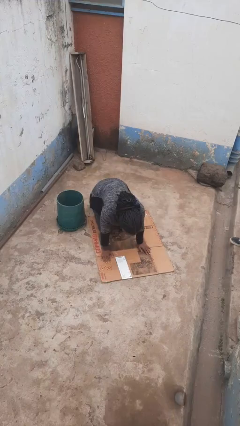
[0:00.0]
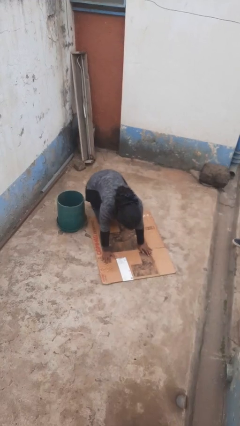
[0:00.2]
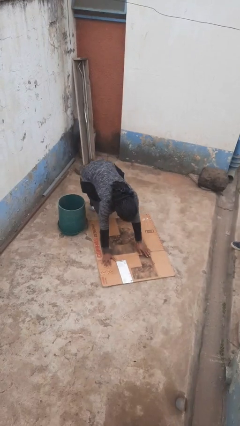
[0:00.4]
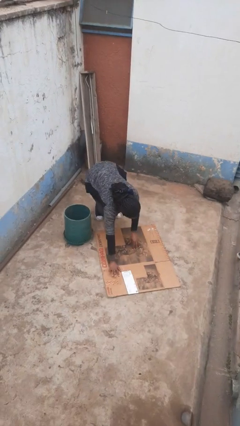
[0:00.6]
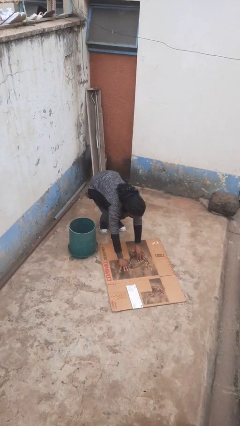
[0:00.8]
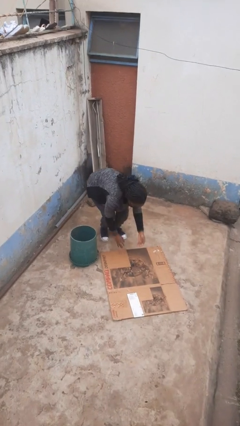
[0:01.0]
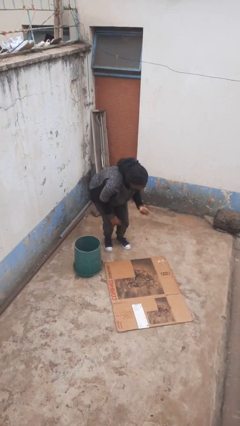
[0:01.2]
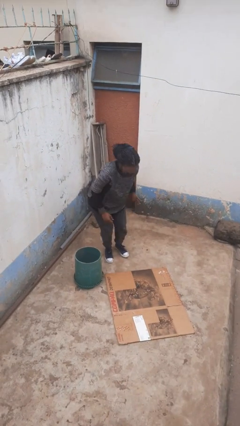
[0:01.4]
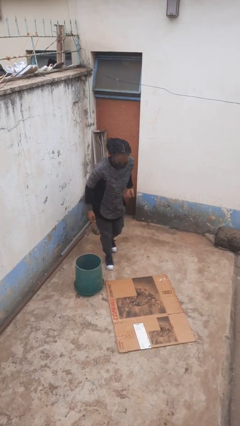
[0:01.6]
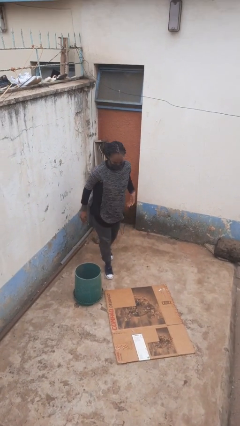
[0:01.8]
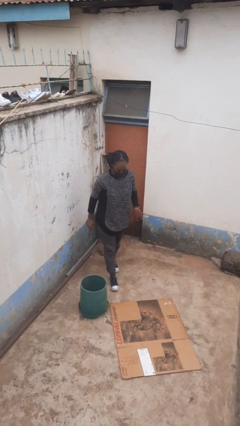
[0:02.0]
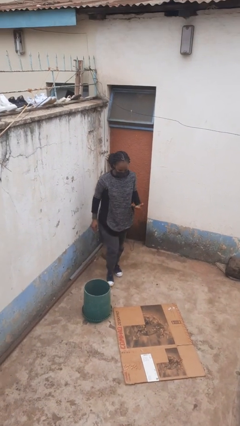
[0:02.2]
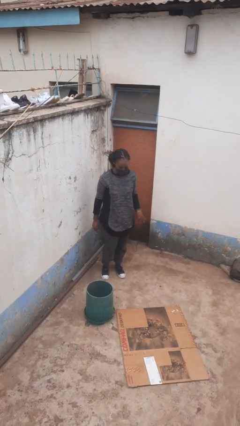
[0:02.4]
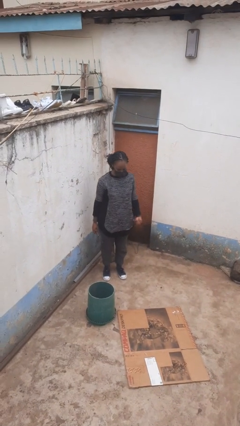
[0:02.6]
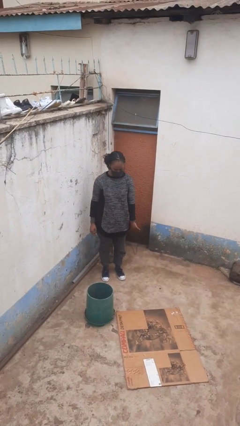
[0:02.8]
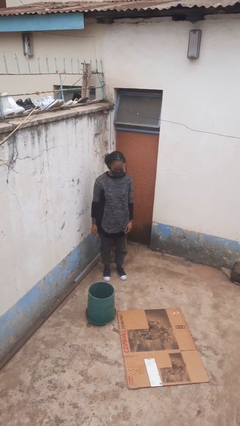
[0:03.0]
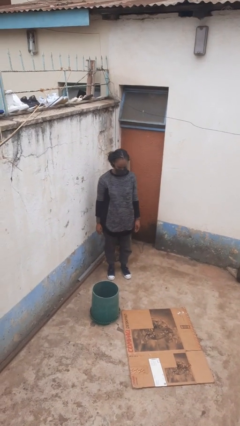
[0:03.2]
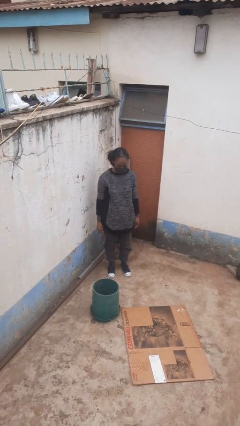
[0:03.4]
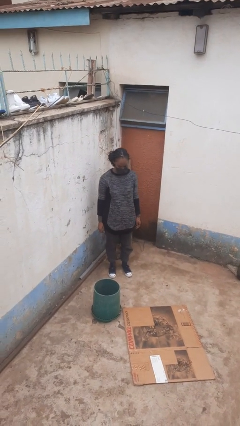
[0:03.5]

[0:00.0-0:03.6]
person stands up from floor

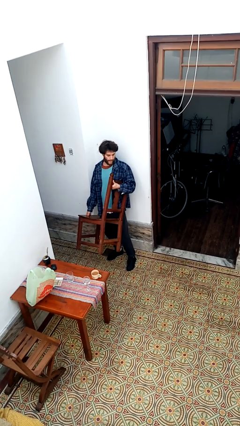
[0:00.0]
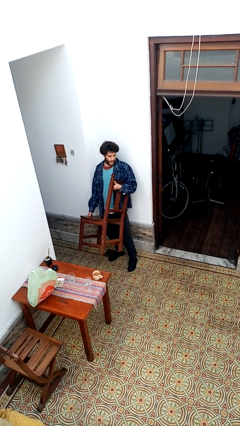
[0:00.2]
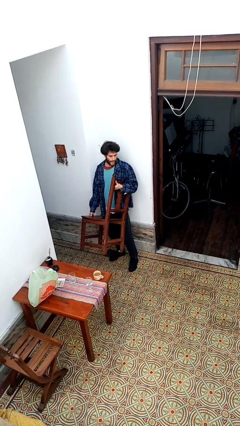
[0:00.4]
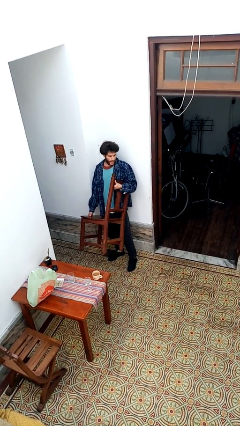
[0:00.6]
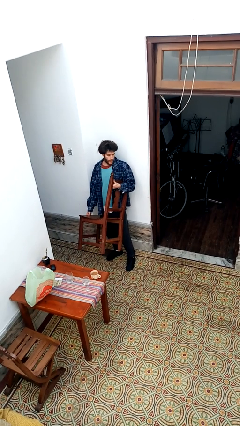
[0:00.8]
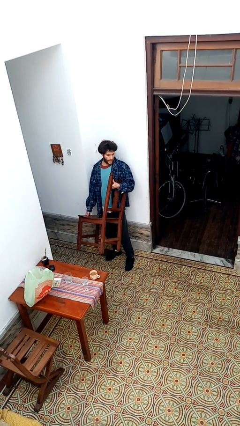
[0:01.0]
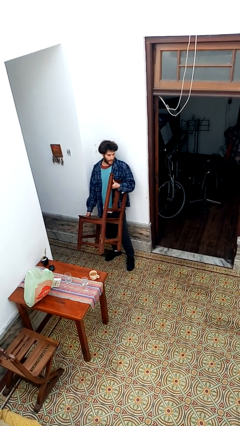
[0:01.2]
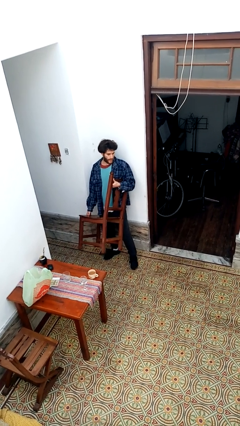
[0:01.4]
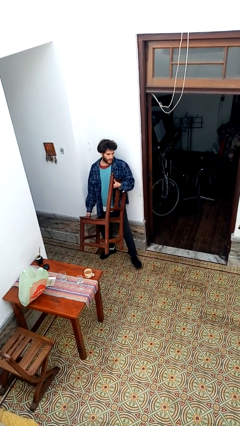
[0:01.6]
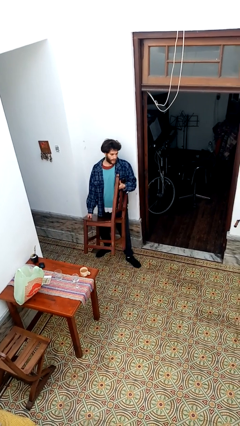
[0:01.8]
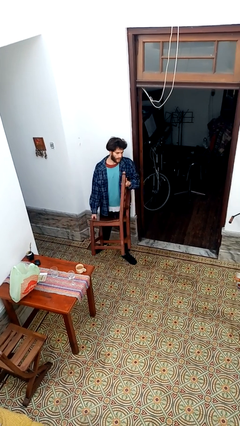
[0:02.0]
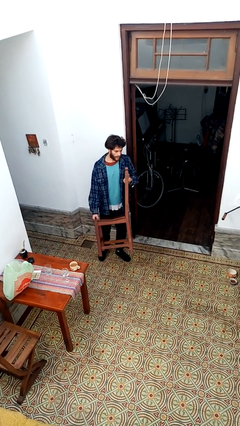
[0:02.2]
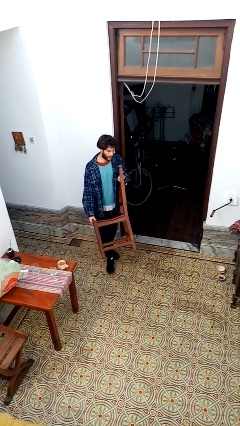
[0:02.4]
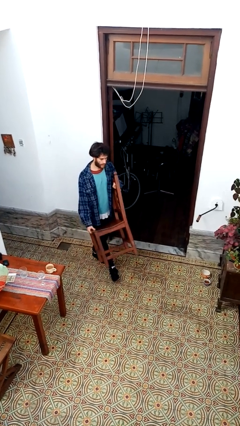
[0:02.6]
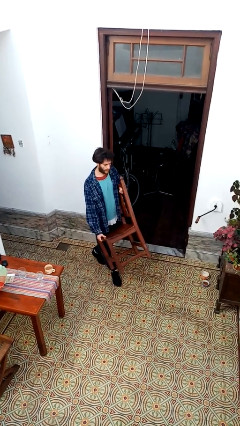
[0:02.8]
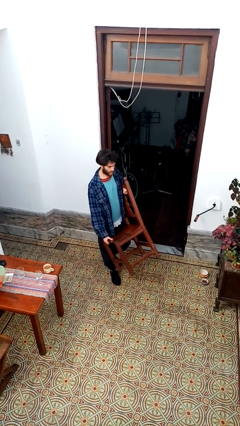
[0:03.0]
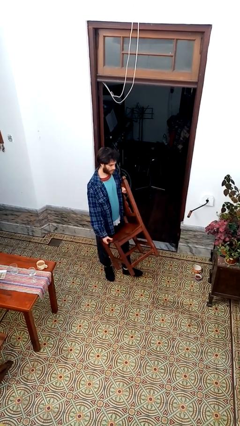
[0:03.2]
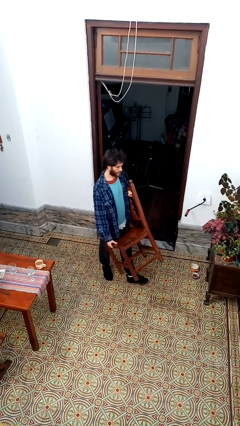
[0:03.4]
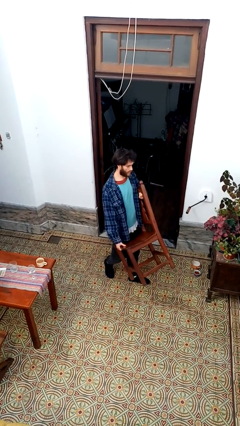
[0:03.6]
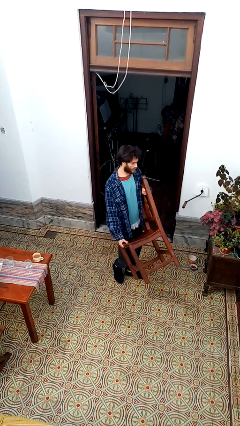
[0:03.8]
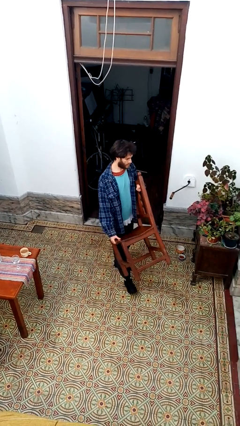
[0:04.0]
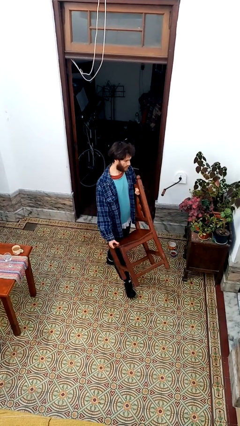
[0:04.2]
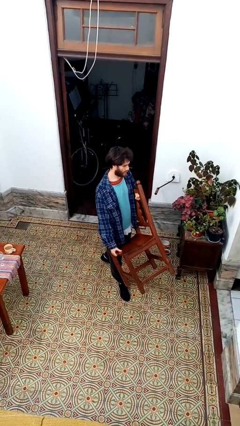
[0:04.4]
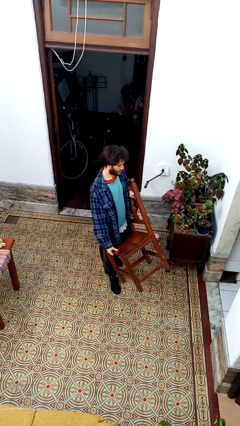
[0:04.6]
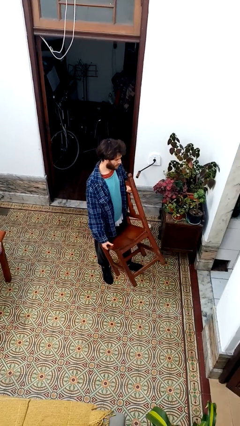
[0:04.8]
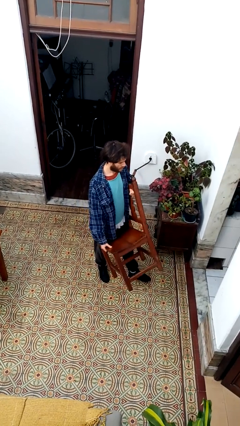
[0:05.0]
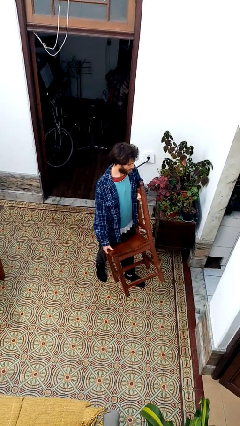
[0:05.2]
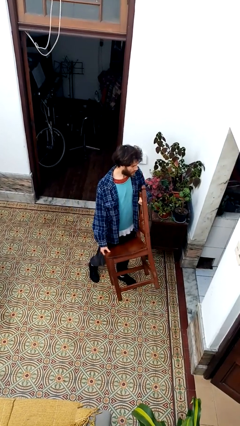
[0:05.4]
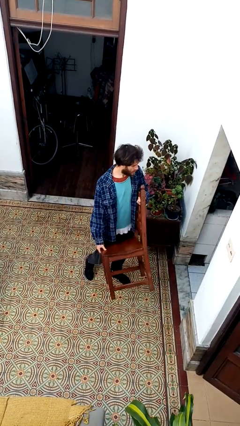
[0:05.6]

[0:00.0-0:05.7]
person carries furniture

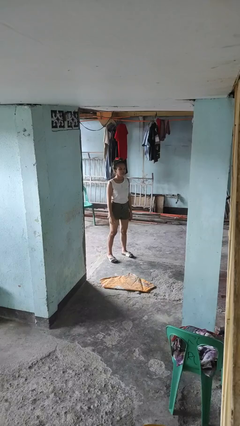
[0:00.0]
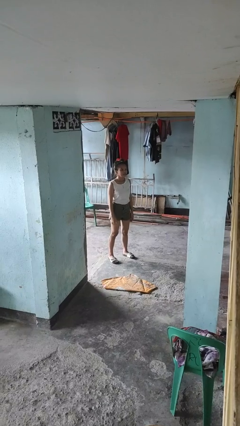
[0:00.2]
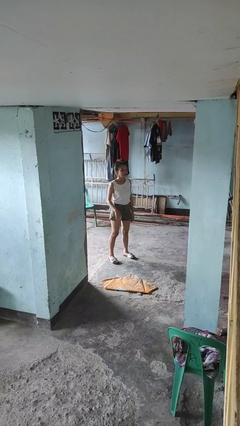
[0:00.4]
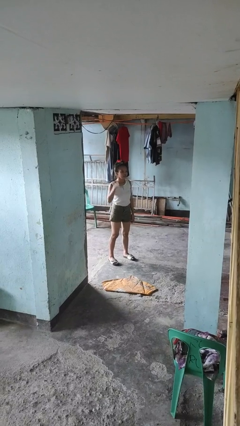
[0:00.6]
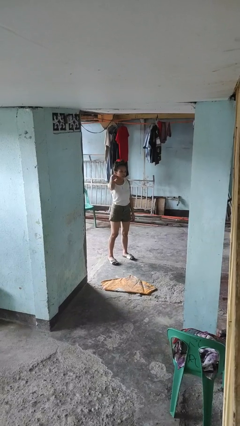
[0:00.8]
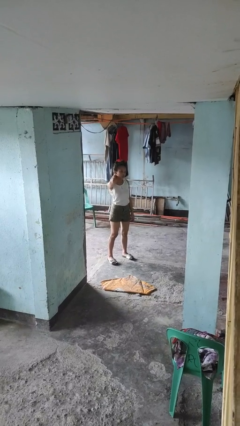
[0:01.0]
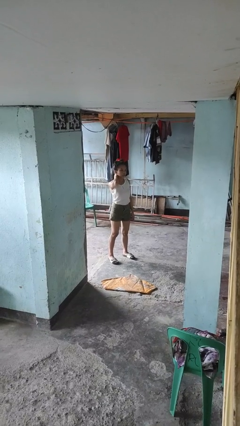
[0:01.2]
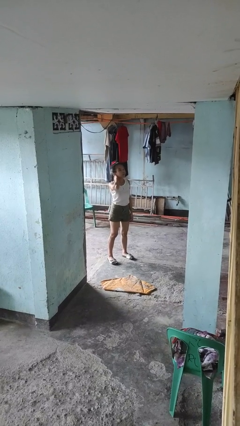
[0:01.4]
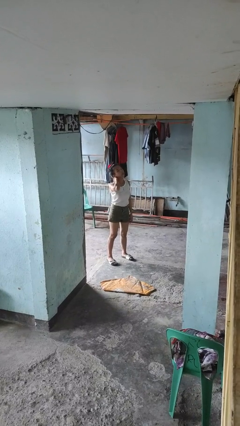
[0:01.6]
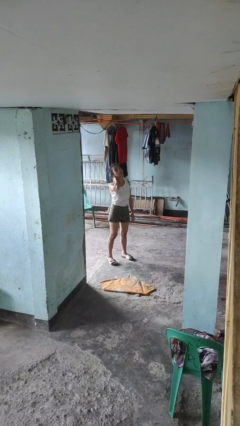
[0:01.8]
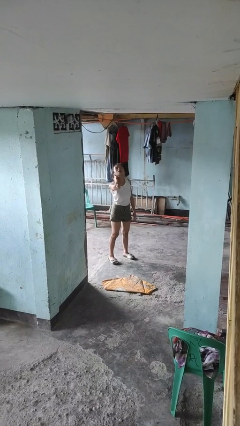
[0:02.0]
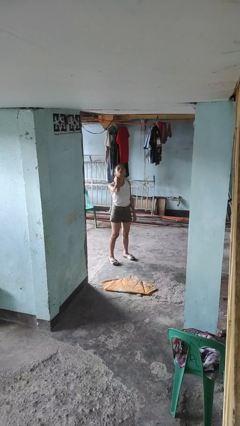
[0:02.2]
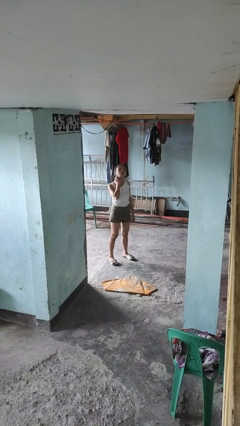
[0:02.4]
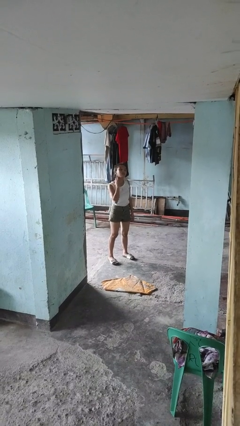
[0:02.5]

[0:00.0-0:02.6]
person rubs neck

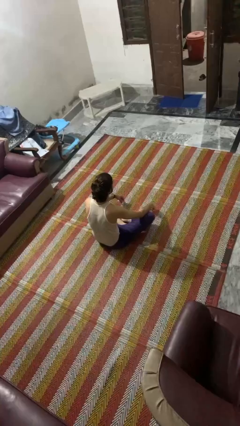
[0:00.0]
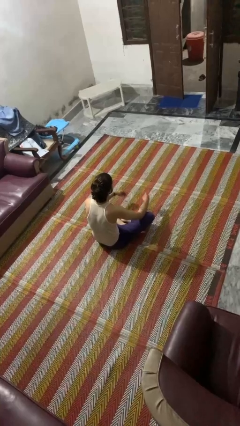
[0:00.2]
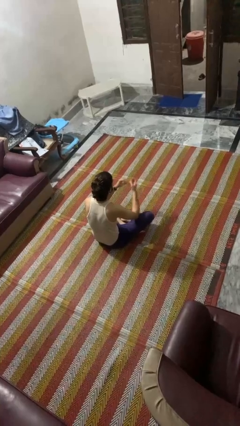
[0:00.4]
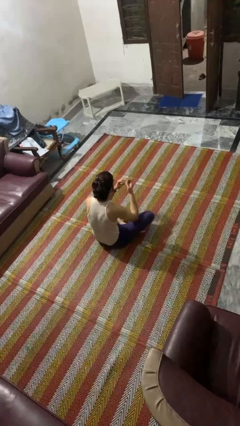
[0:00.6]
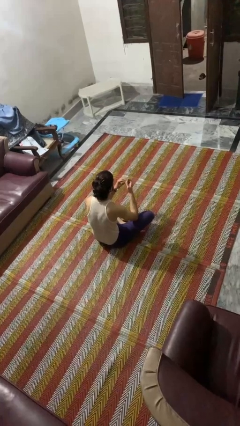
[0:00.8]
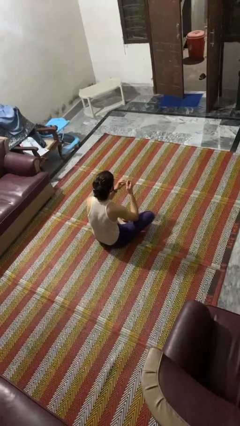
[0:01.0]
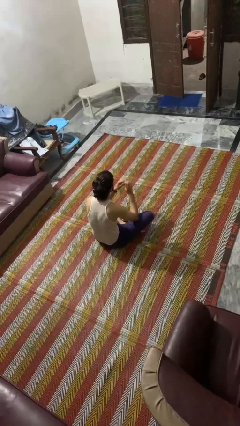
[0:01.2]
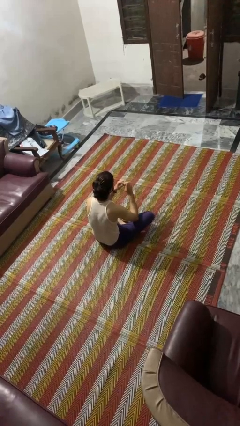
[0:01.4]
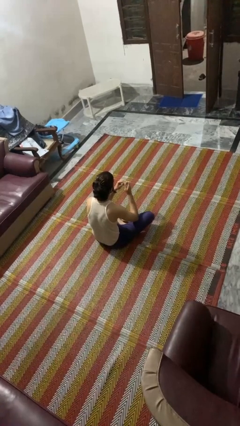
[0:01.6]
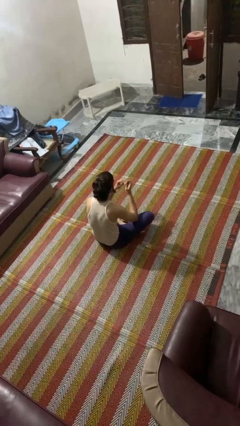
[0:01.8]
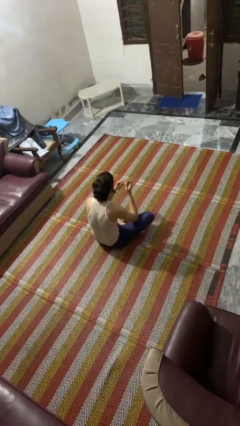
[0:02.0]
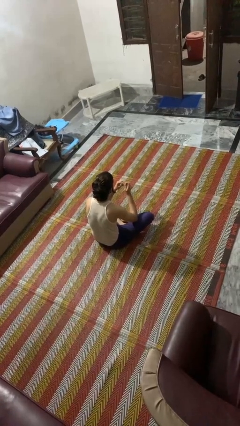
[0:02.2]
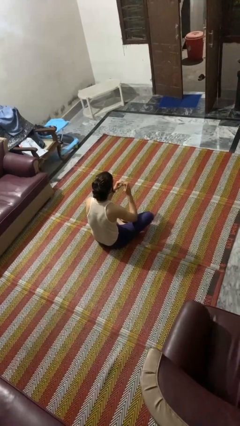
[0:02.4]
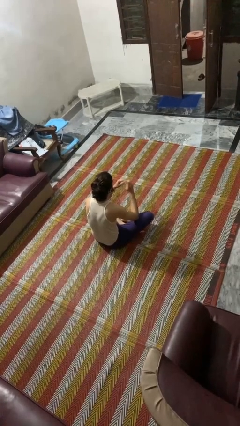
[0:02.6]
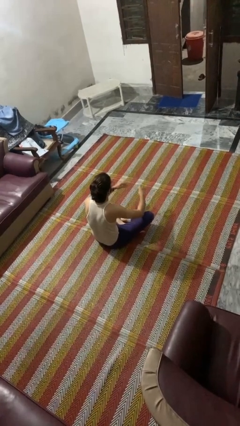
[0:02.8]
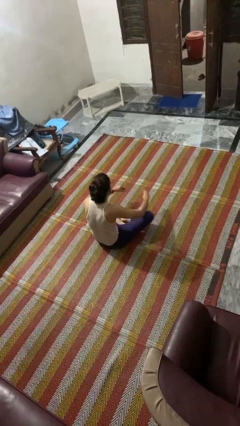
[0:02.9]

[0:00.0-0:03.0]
person files fingernails

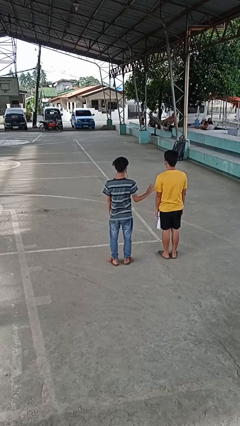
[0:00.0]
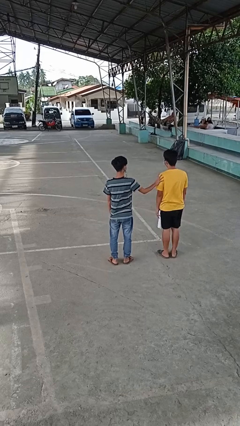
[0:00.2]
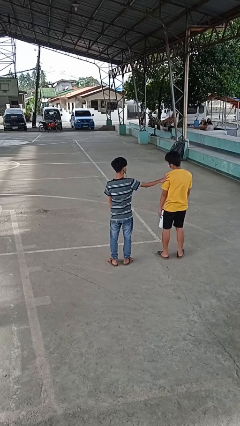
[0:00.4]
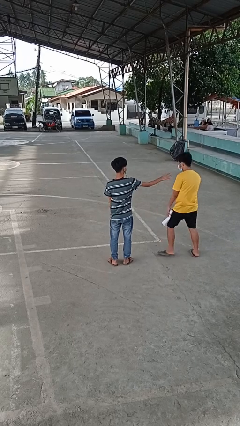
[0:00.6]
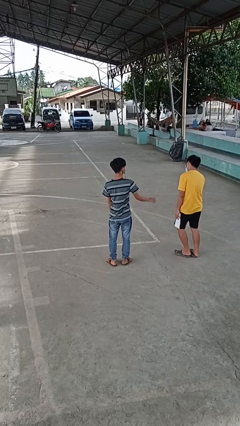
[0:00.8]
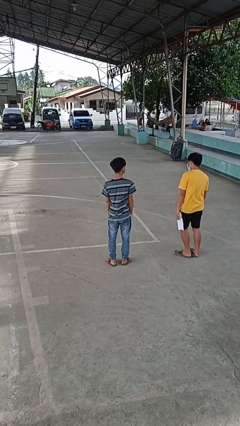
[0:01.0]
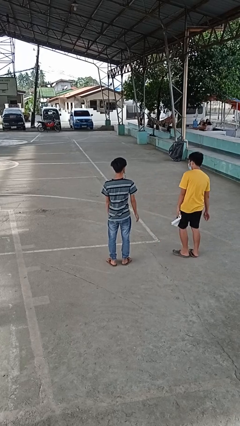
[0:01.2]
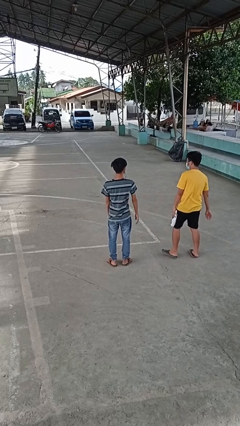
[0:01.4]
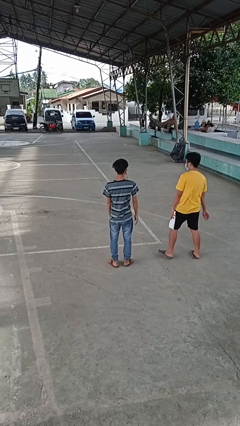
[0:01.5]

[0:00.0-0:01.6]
person shoves person

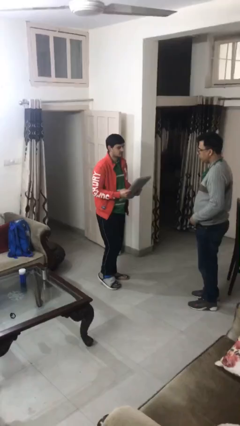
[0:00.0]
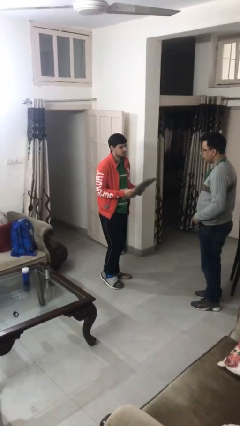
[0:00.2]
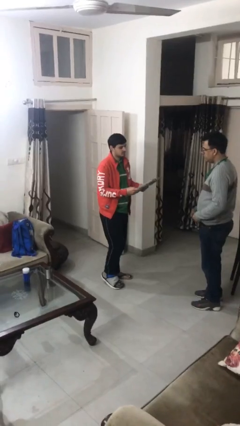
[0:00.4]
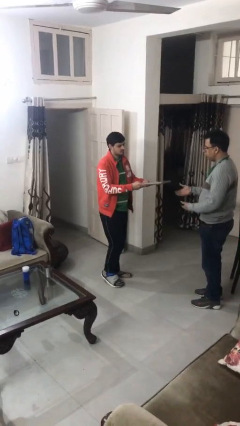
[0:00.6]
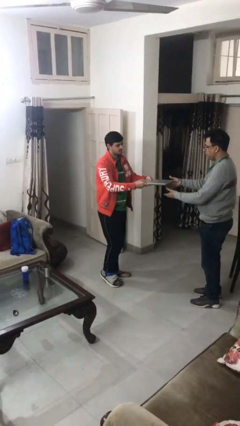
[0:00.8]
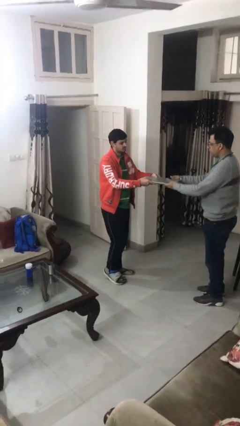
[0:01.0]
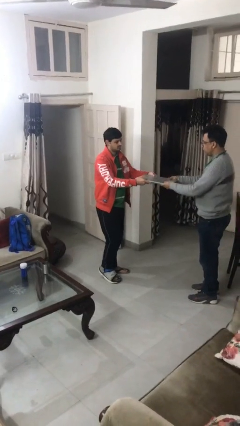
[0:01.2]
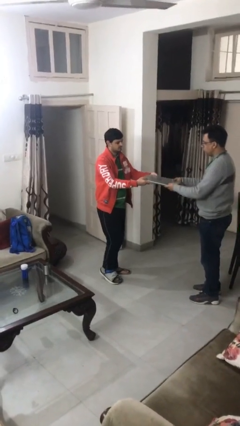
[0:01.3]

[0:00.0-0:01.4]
person transfers object to person
